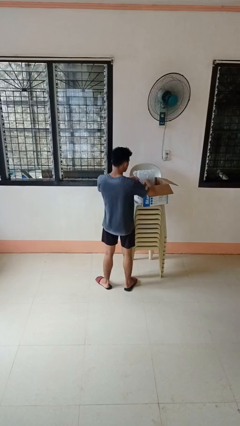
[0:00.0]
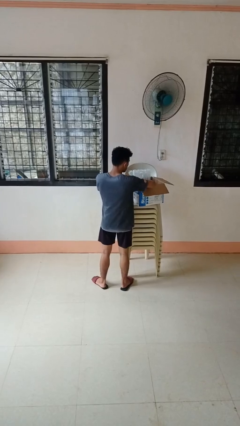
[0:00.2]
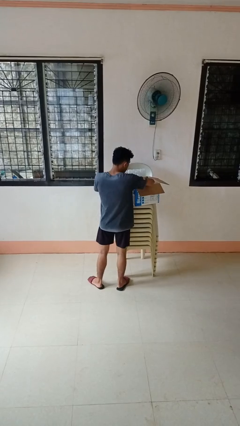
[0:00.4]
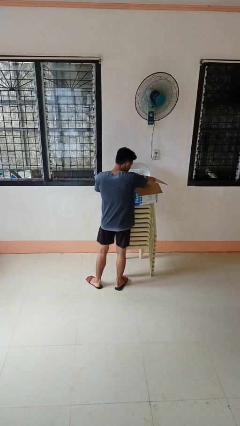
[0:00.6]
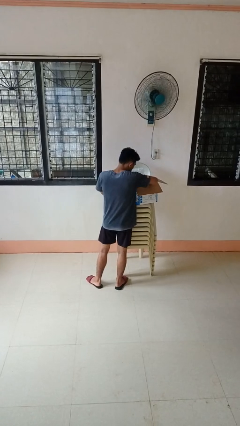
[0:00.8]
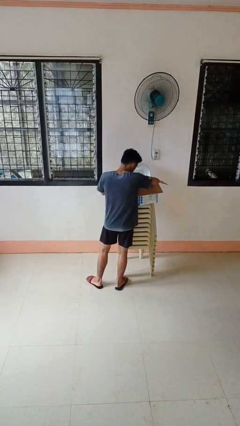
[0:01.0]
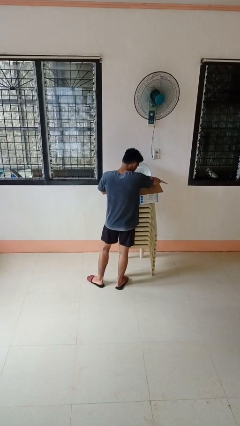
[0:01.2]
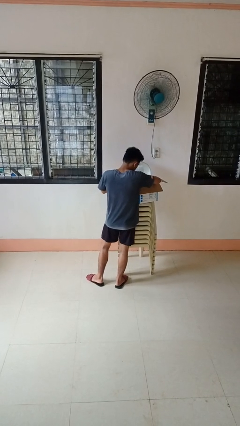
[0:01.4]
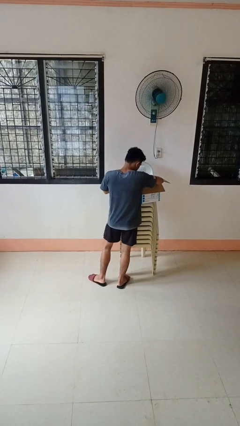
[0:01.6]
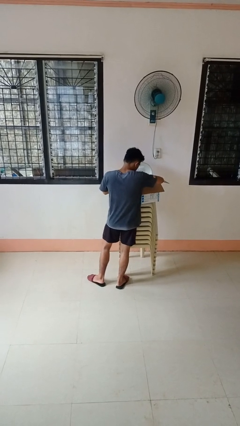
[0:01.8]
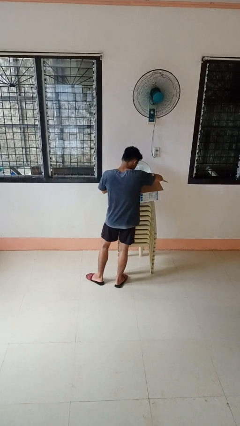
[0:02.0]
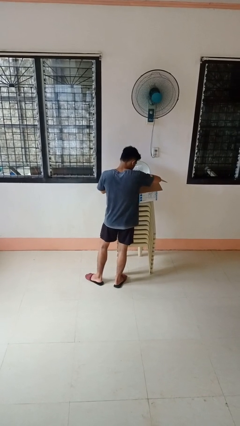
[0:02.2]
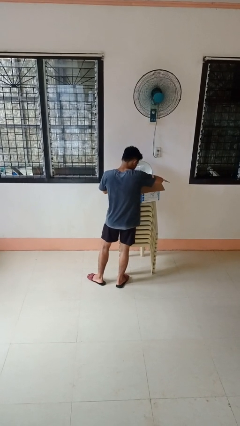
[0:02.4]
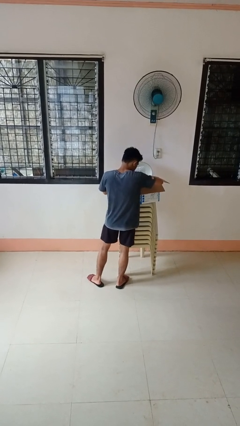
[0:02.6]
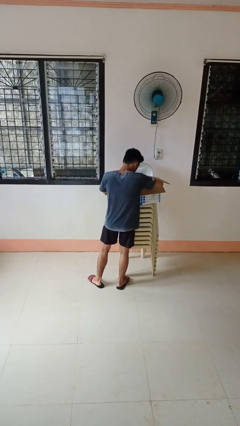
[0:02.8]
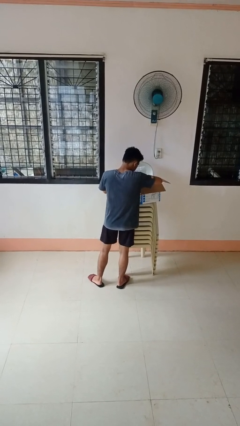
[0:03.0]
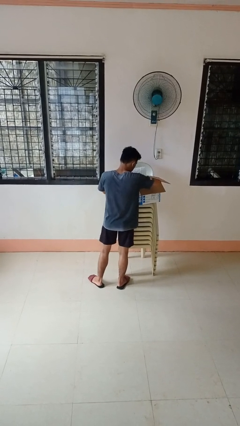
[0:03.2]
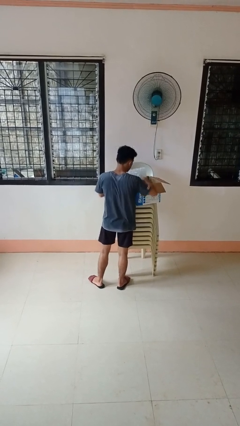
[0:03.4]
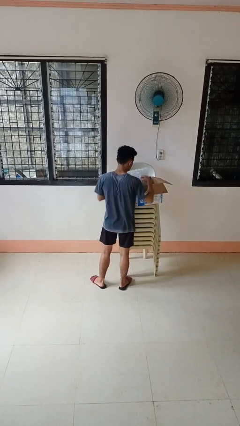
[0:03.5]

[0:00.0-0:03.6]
person searches in box

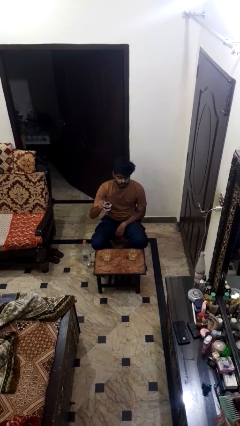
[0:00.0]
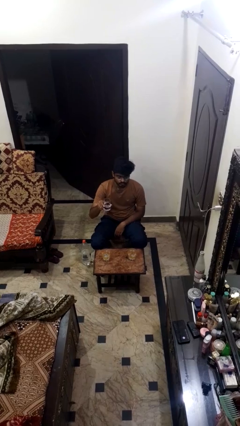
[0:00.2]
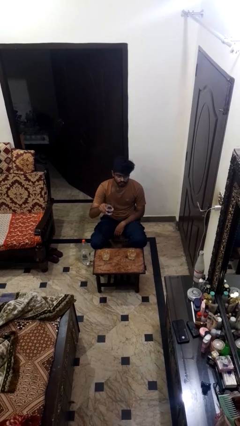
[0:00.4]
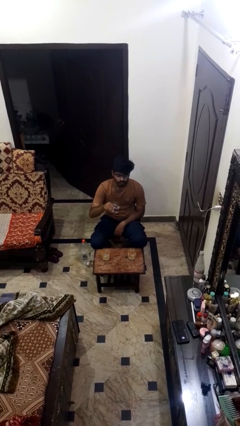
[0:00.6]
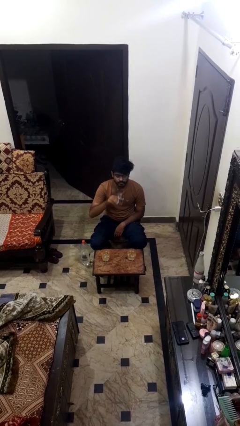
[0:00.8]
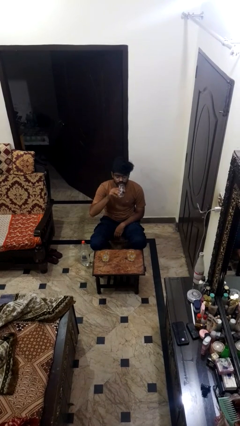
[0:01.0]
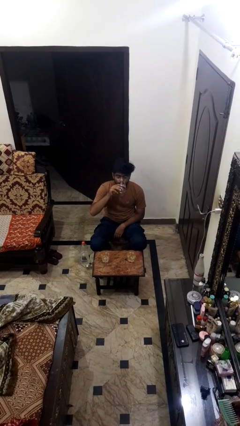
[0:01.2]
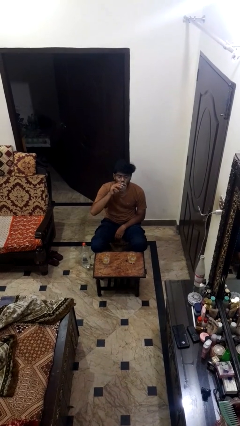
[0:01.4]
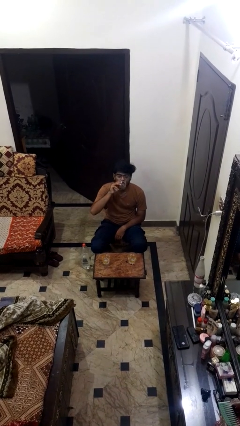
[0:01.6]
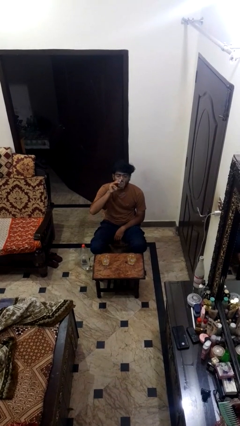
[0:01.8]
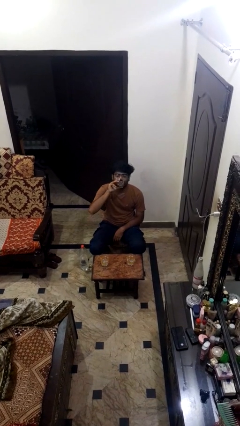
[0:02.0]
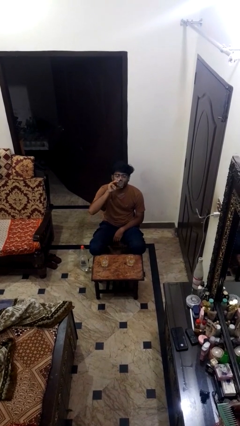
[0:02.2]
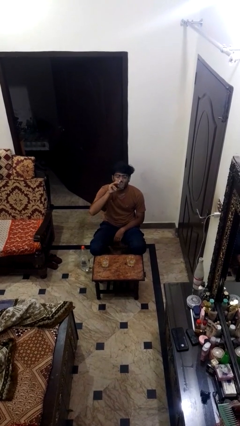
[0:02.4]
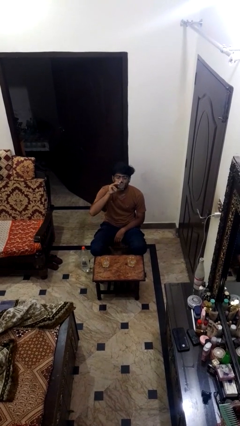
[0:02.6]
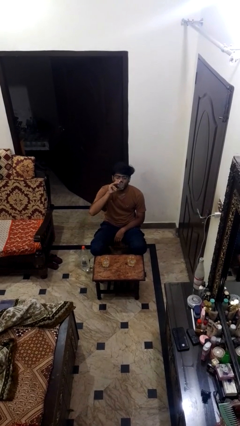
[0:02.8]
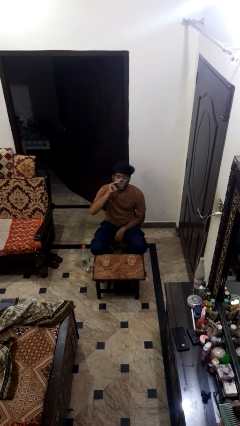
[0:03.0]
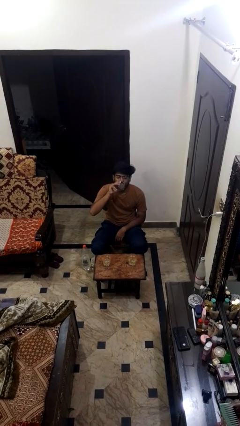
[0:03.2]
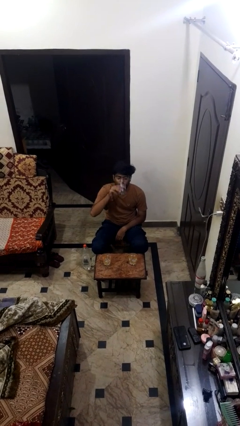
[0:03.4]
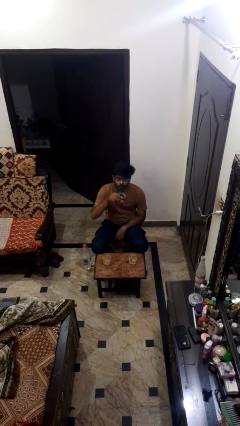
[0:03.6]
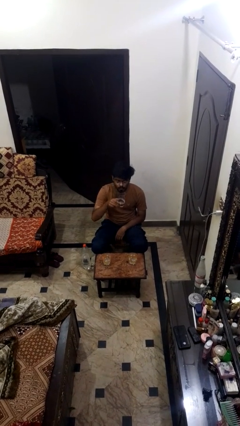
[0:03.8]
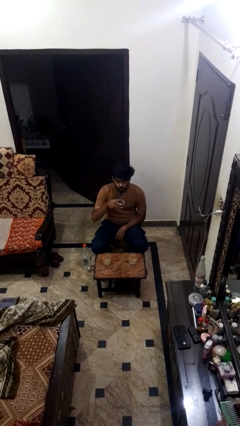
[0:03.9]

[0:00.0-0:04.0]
person drinks from shotglass

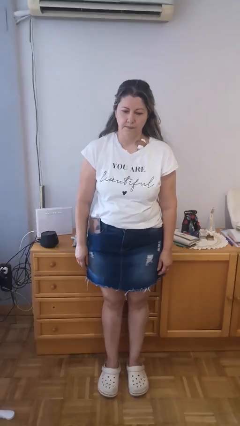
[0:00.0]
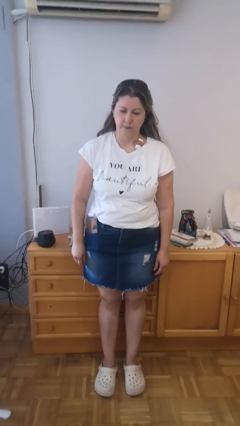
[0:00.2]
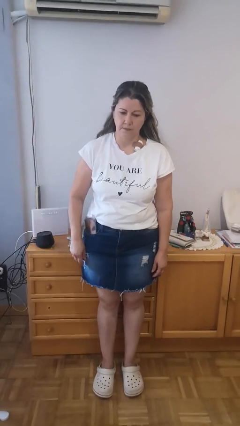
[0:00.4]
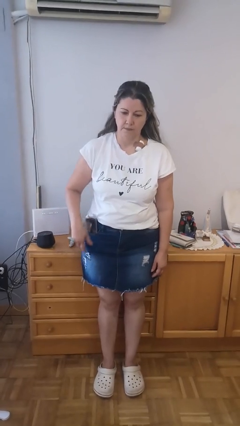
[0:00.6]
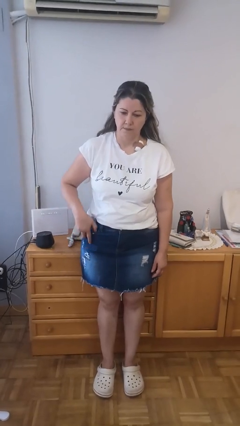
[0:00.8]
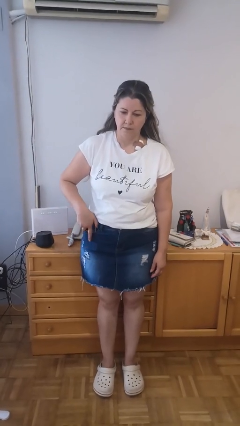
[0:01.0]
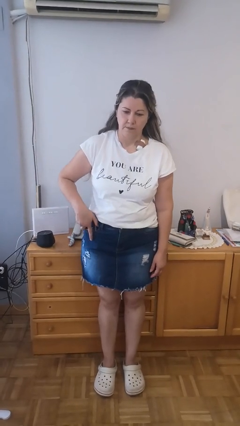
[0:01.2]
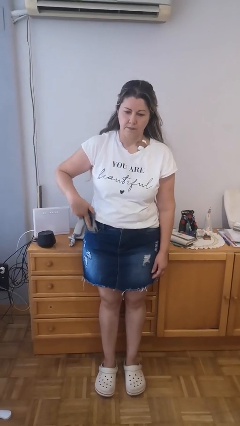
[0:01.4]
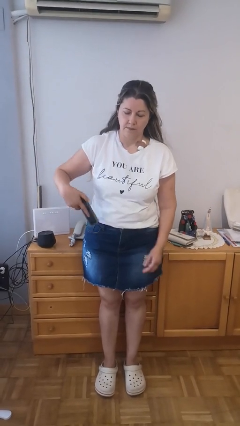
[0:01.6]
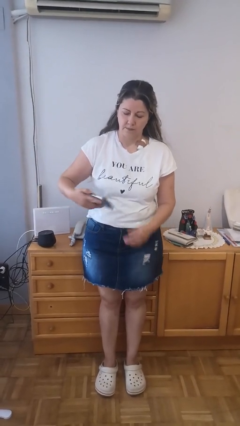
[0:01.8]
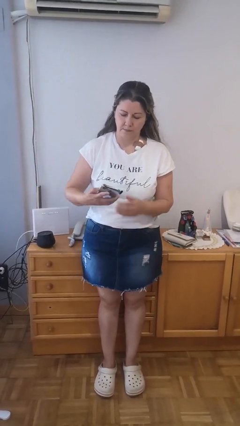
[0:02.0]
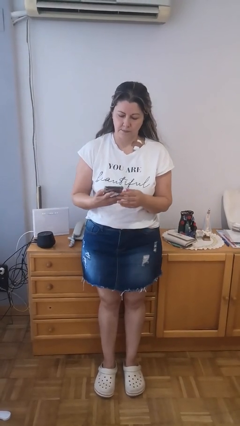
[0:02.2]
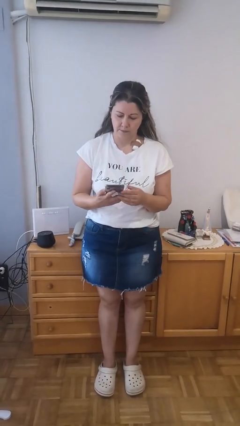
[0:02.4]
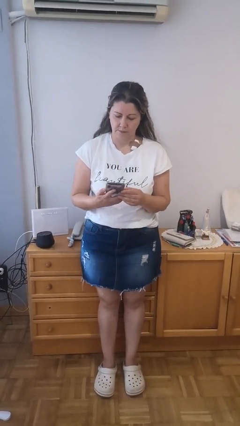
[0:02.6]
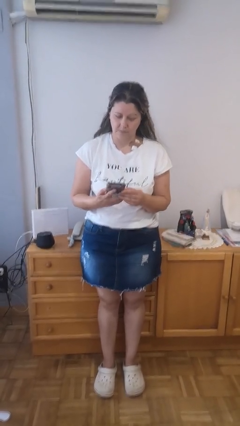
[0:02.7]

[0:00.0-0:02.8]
person takes phone from pocket

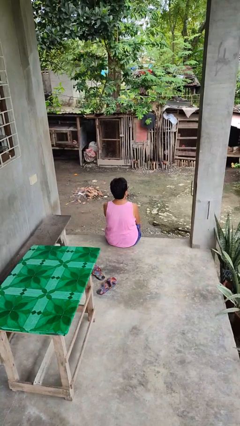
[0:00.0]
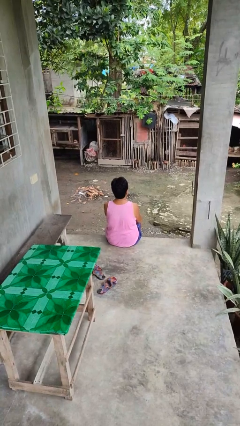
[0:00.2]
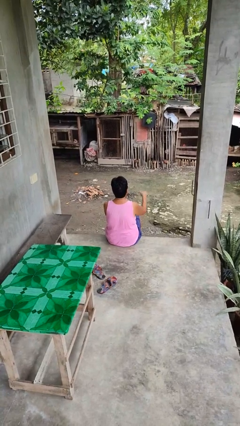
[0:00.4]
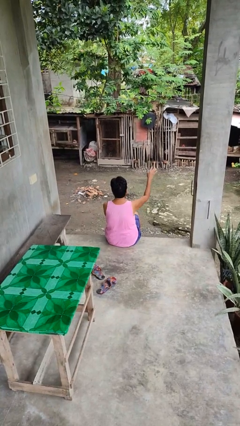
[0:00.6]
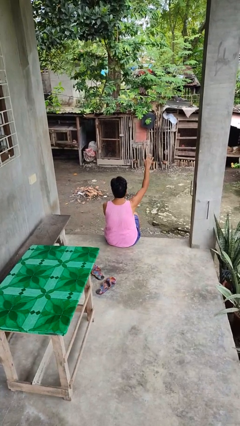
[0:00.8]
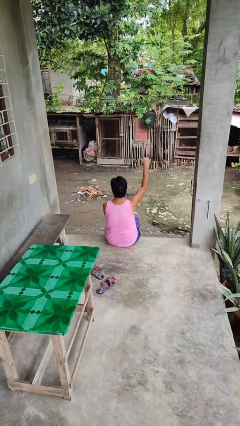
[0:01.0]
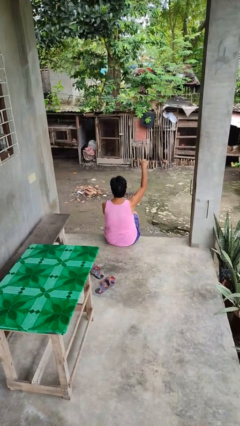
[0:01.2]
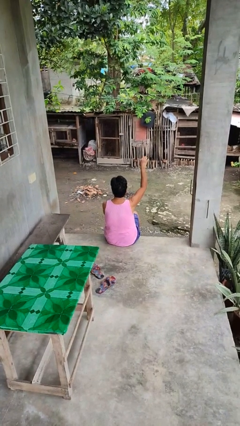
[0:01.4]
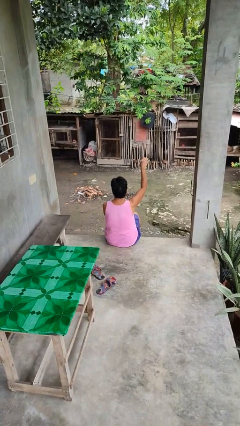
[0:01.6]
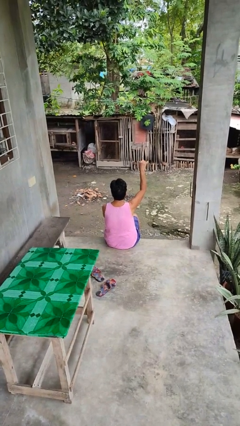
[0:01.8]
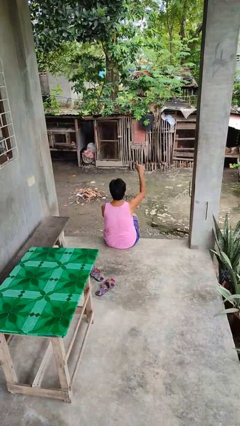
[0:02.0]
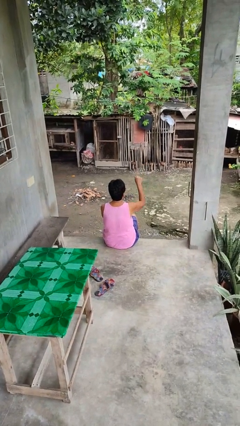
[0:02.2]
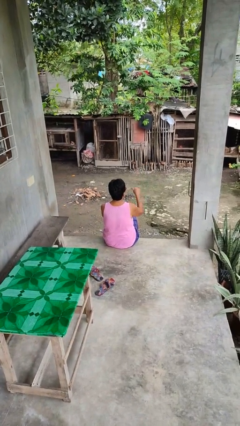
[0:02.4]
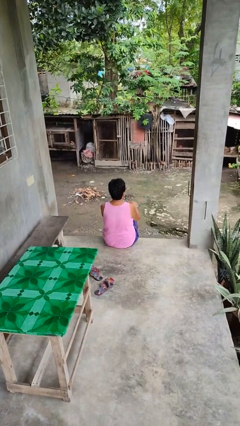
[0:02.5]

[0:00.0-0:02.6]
person gestures come here

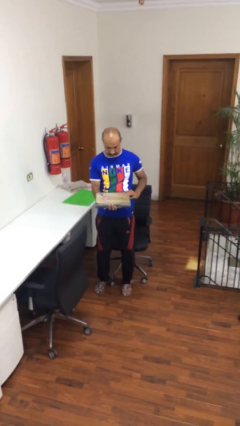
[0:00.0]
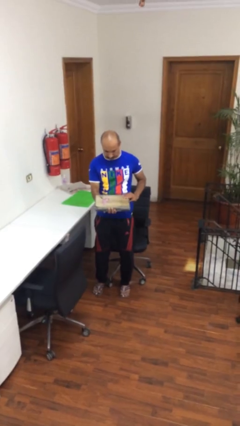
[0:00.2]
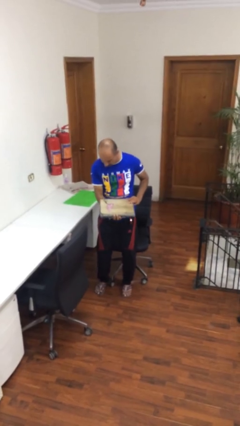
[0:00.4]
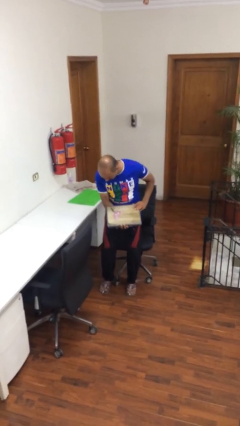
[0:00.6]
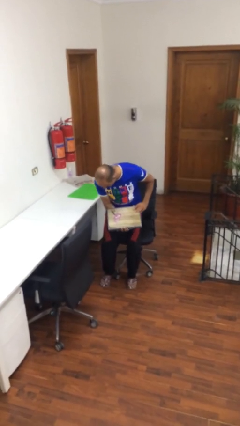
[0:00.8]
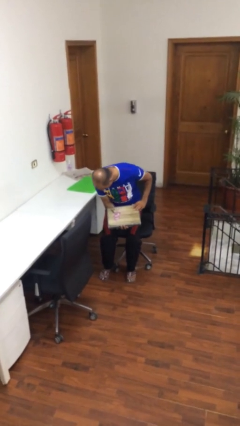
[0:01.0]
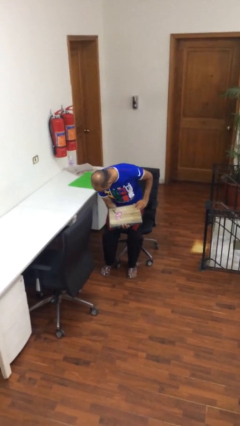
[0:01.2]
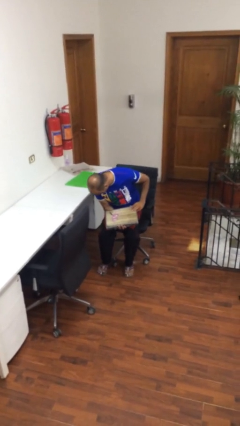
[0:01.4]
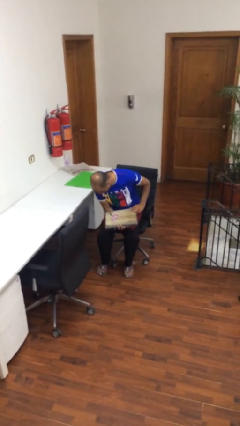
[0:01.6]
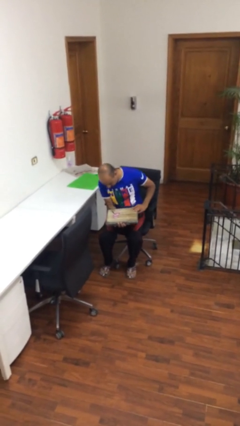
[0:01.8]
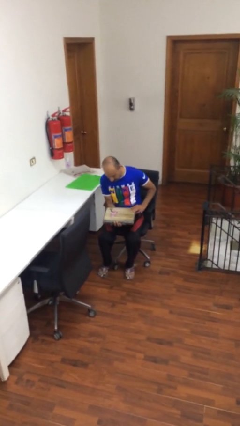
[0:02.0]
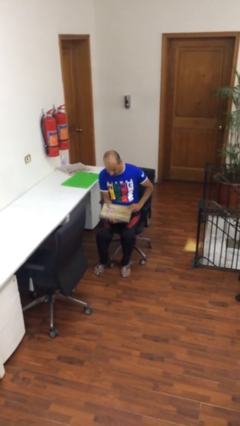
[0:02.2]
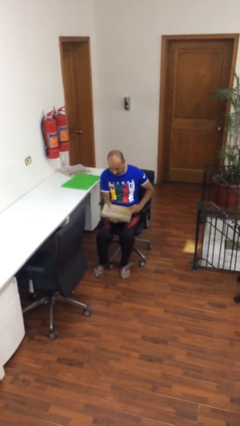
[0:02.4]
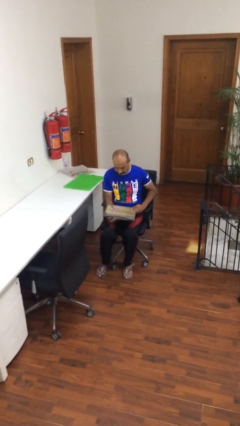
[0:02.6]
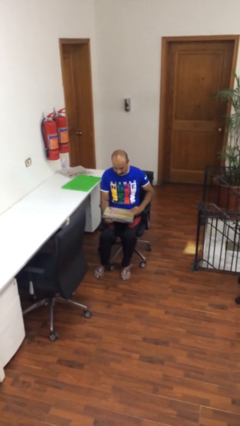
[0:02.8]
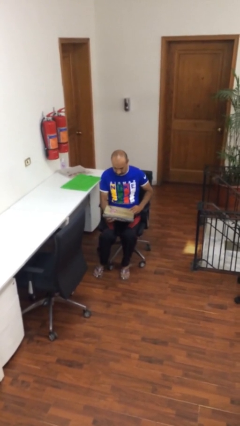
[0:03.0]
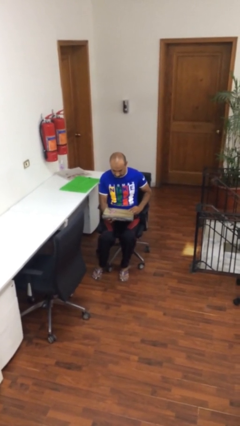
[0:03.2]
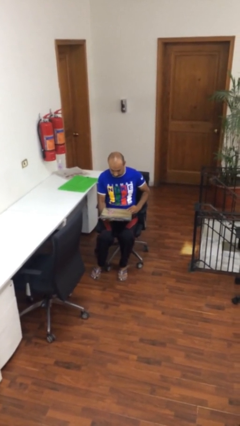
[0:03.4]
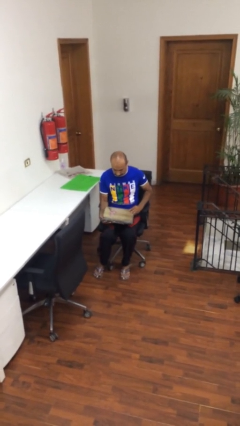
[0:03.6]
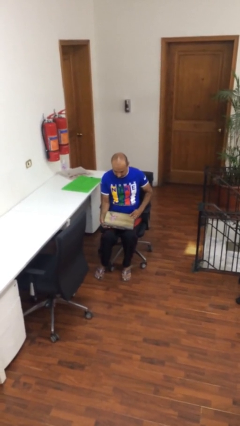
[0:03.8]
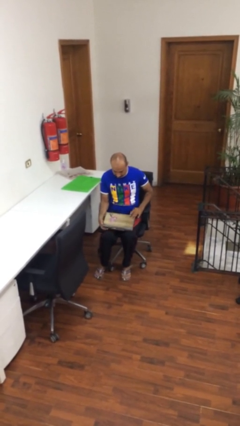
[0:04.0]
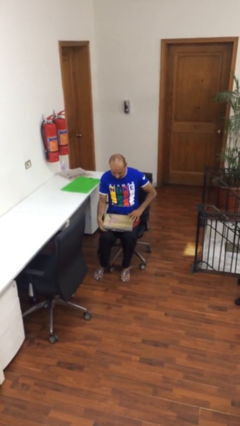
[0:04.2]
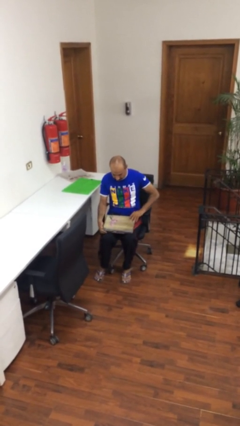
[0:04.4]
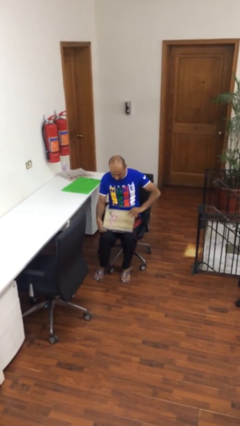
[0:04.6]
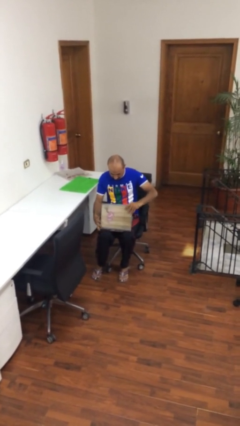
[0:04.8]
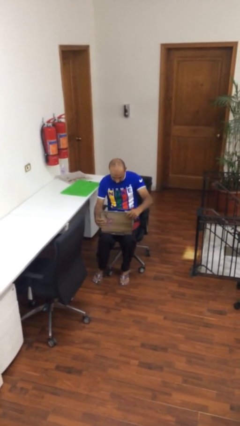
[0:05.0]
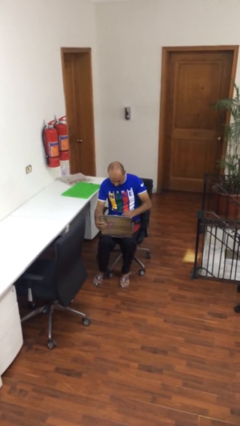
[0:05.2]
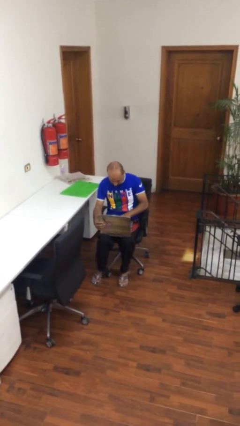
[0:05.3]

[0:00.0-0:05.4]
person sits down
